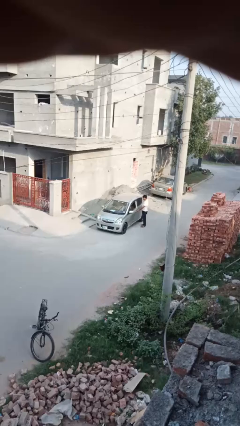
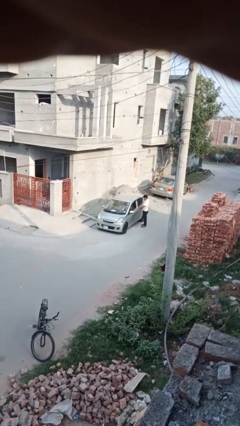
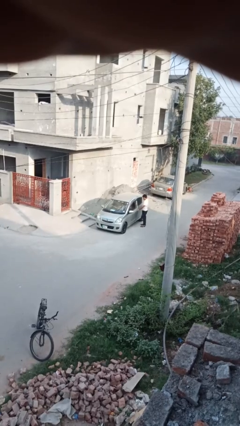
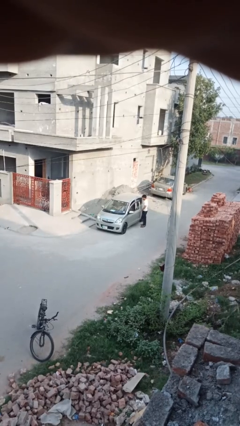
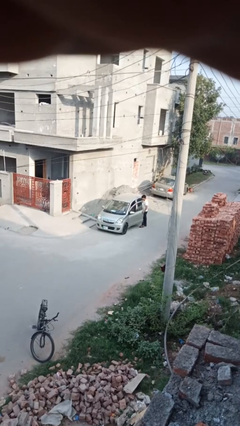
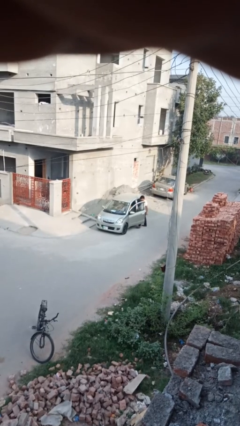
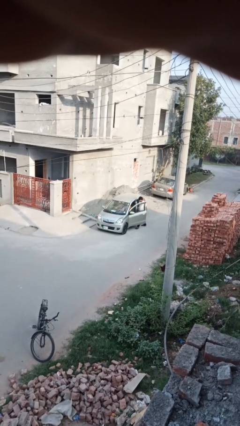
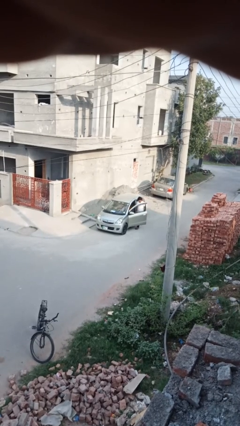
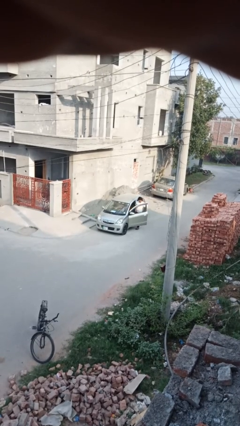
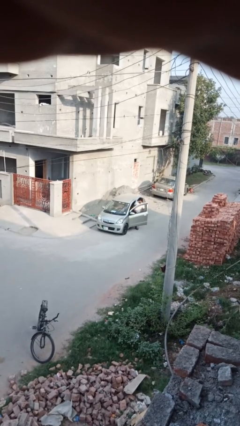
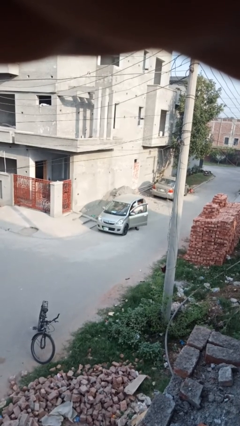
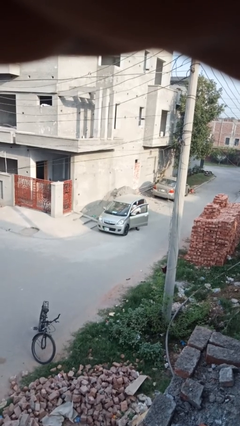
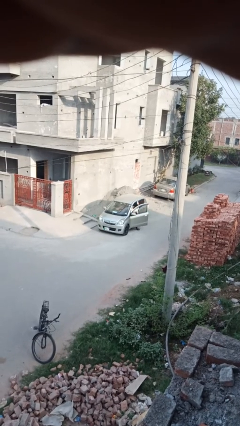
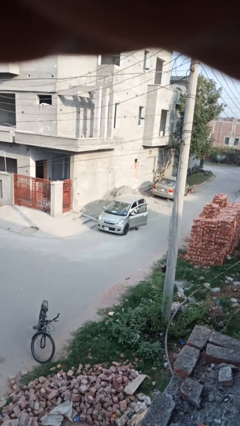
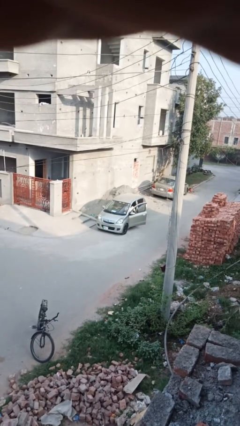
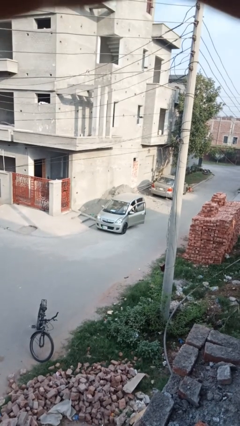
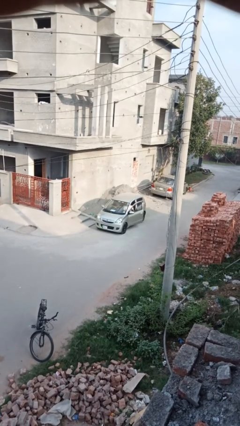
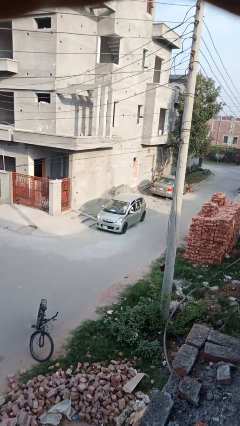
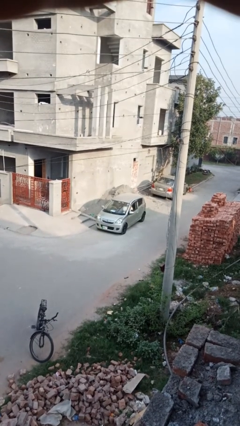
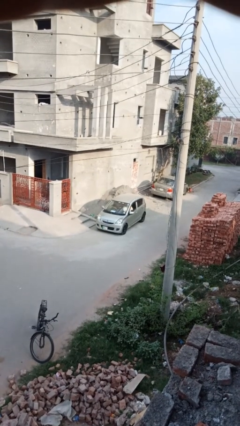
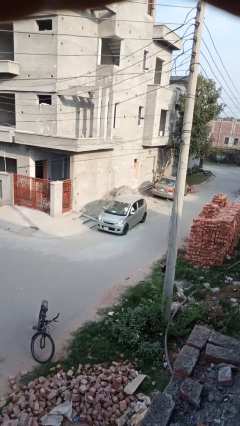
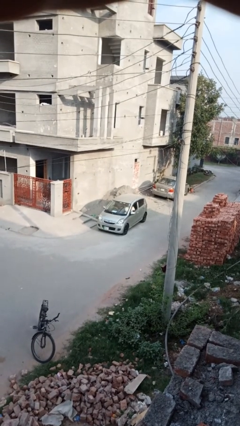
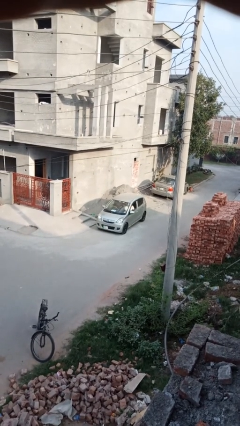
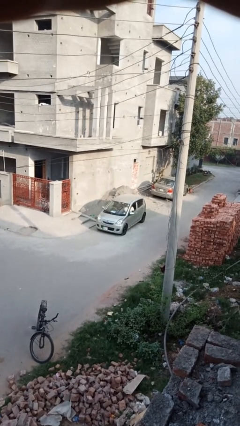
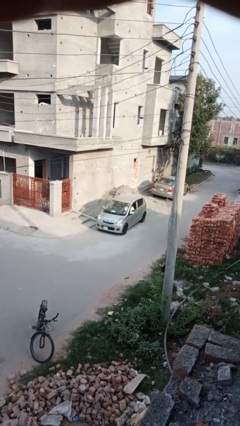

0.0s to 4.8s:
car picks up person

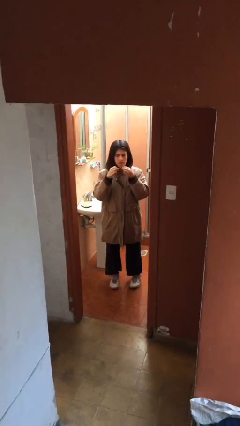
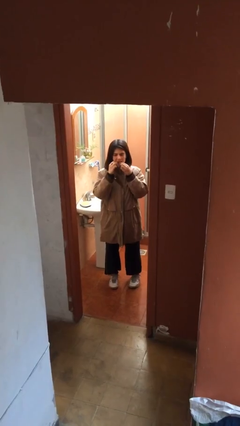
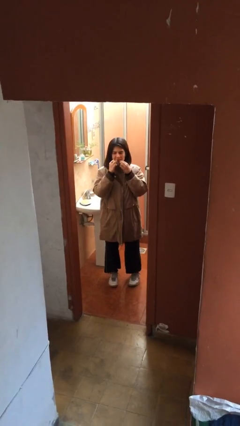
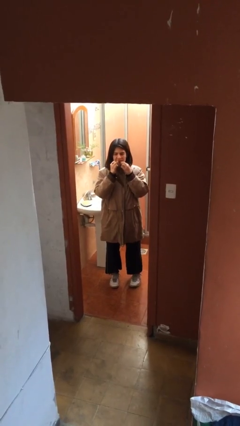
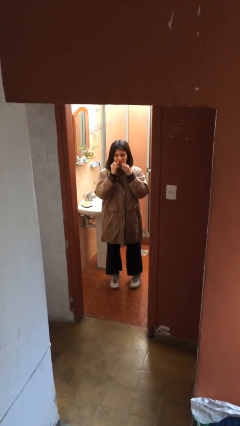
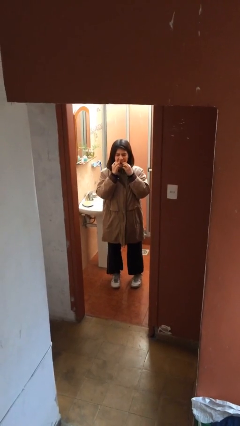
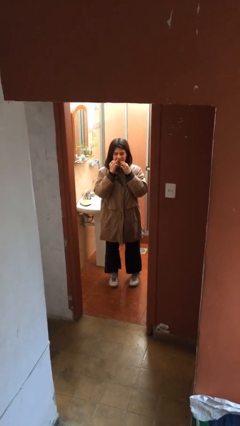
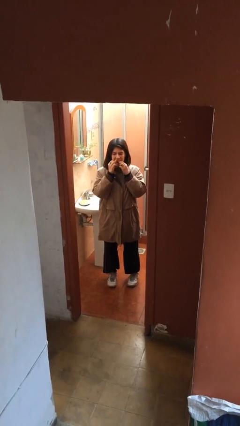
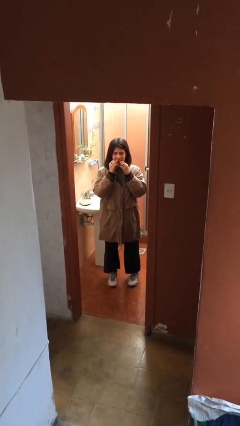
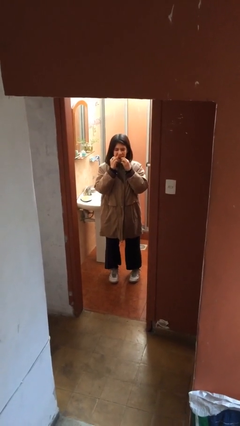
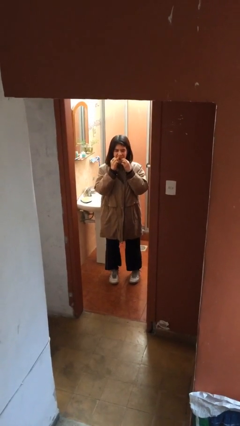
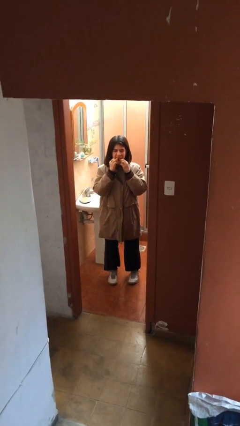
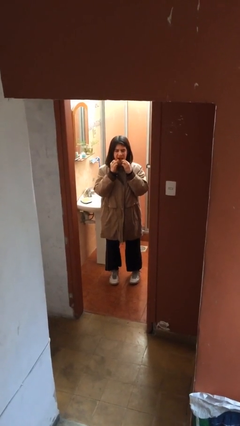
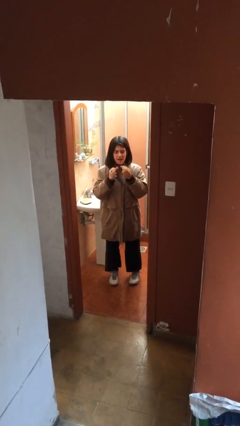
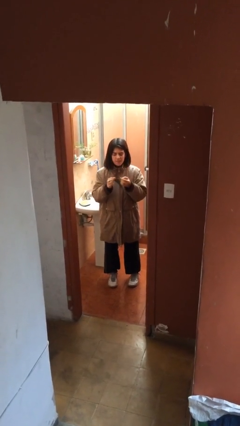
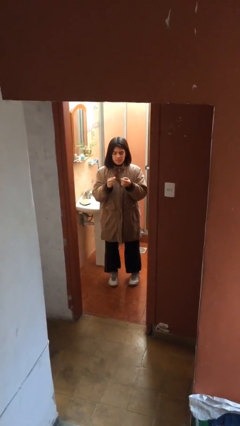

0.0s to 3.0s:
person flosses

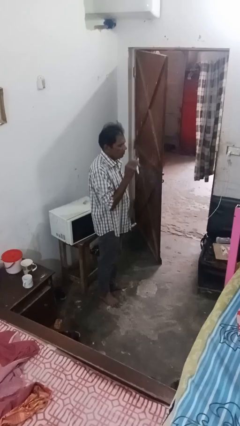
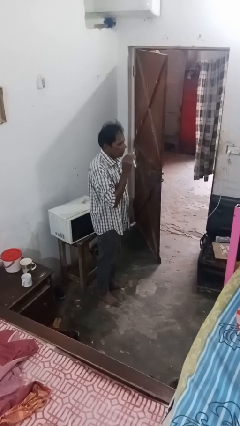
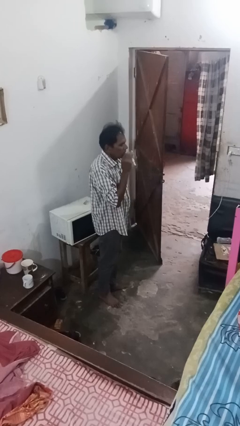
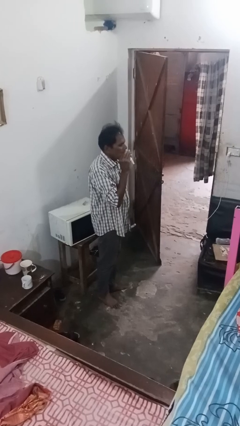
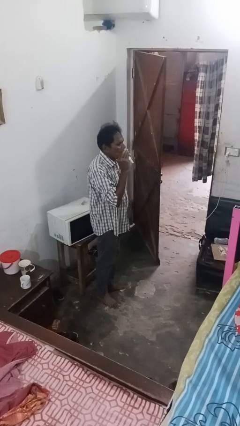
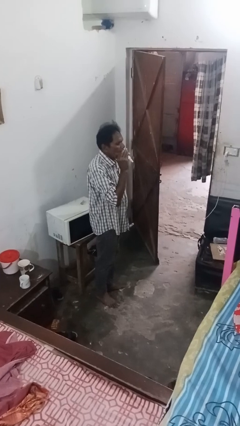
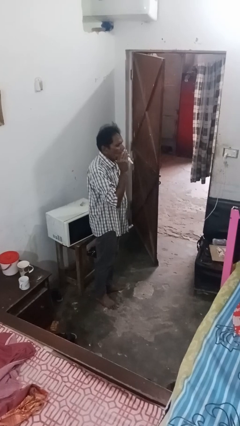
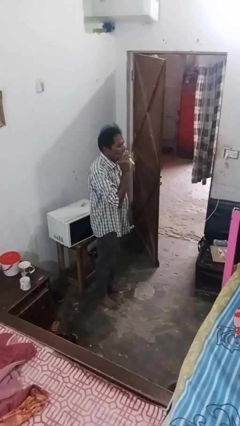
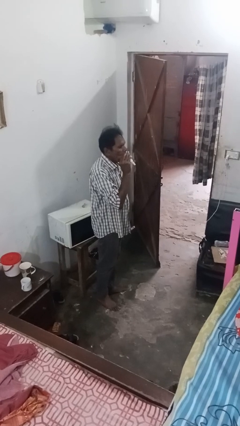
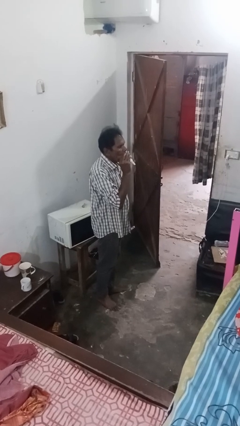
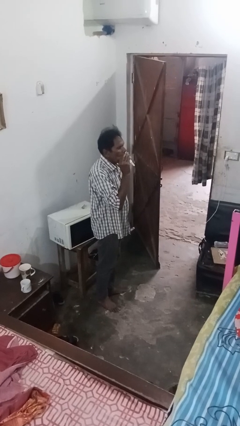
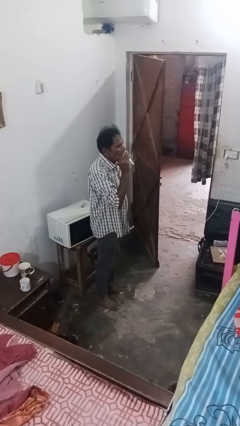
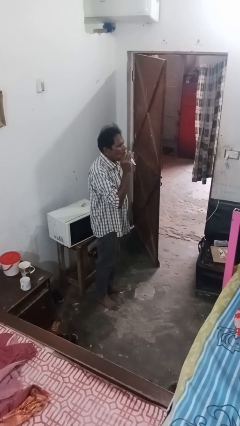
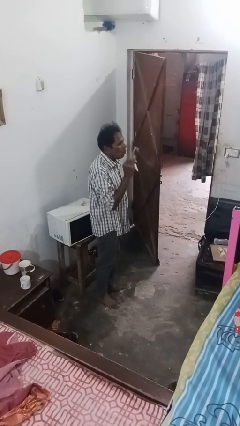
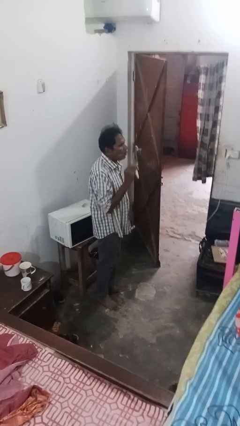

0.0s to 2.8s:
person vapes

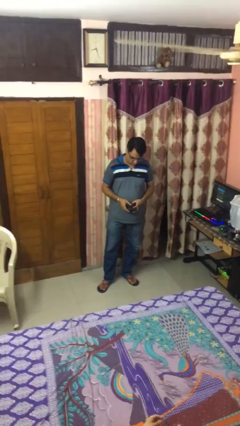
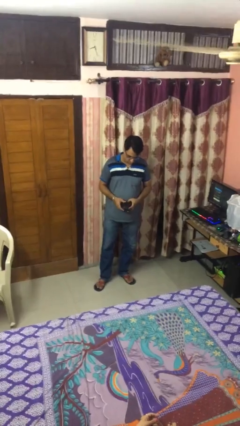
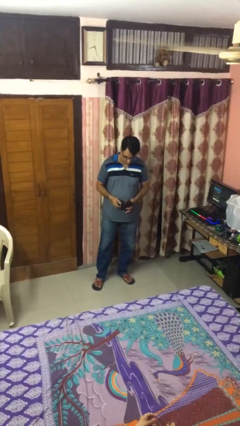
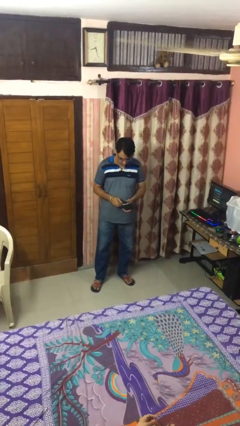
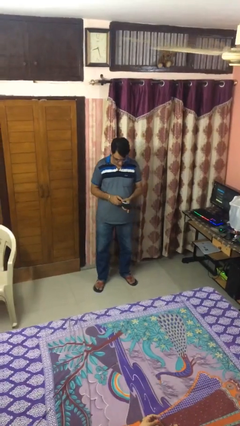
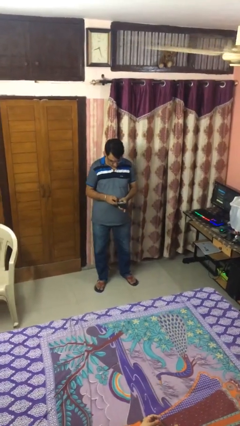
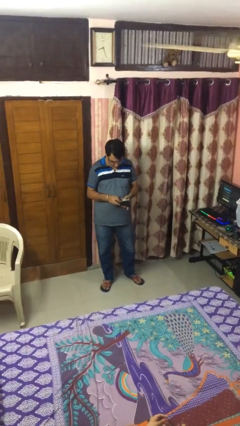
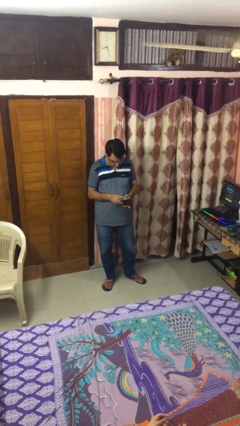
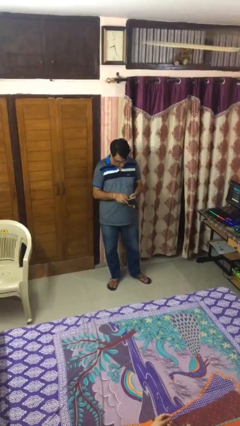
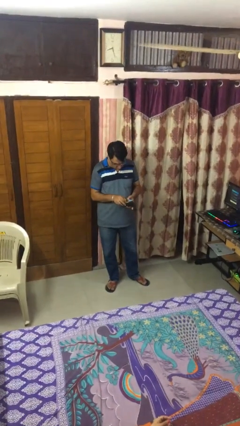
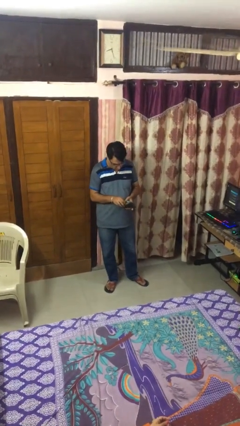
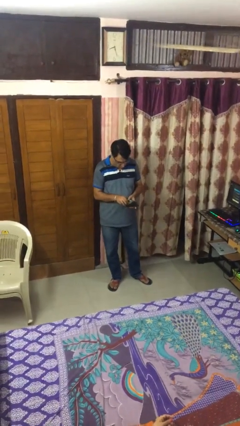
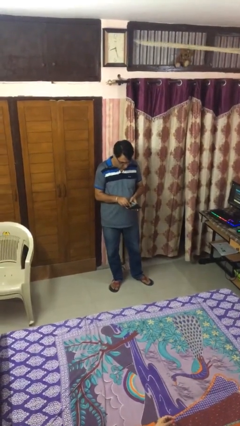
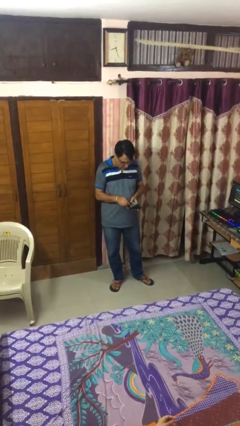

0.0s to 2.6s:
person searches in purse

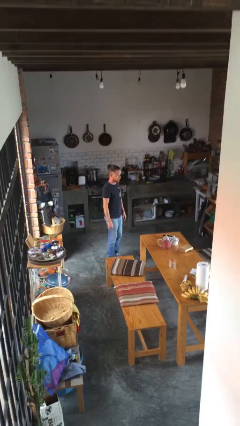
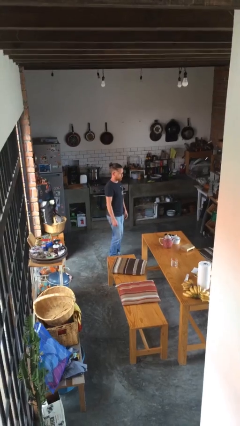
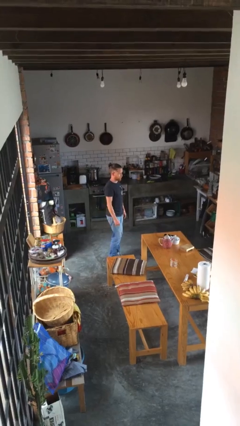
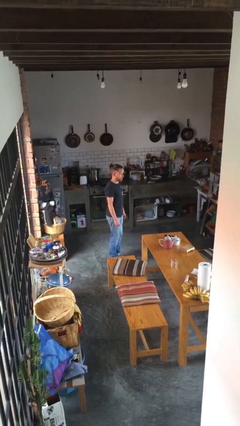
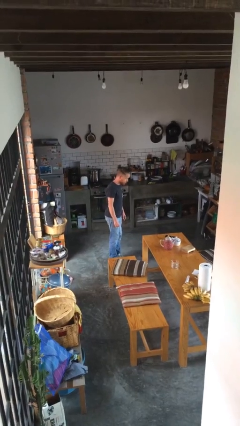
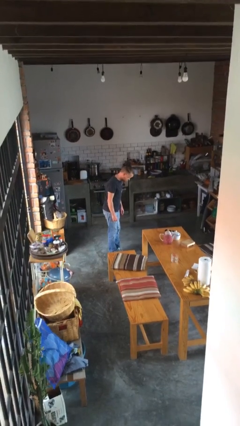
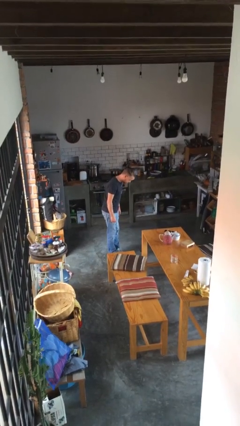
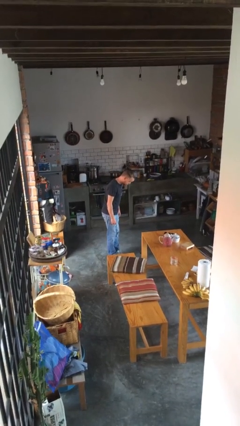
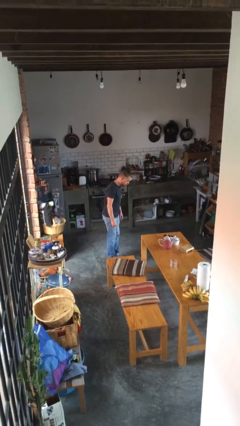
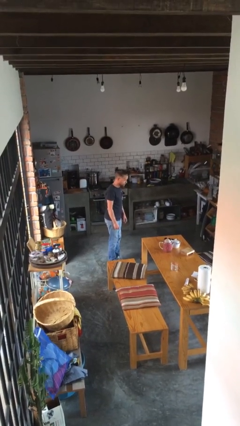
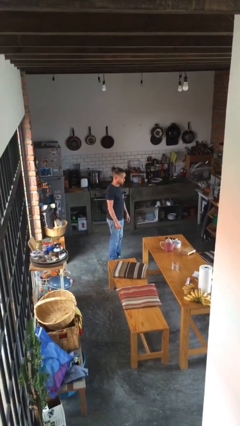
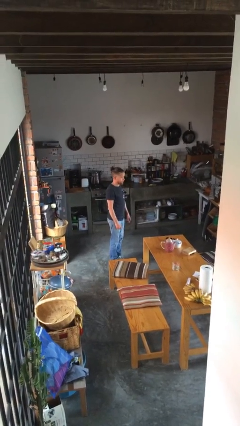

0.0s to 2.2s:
person bows

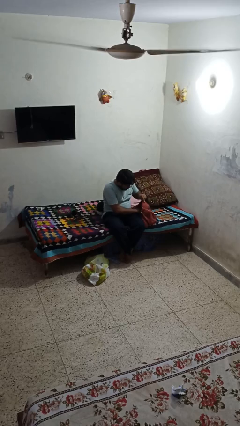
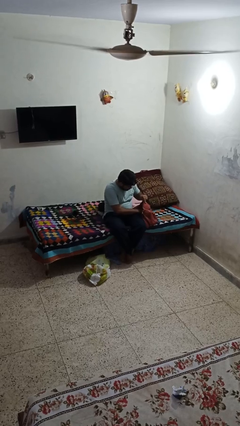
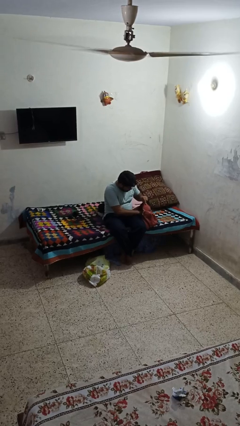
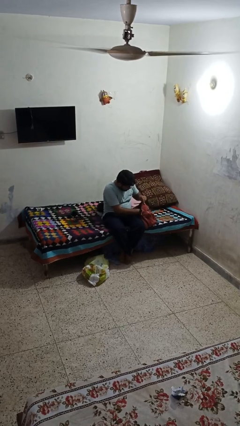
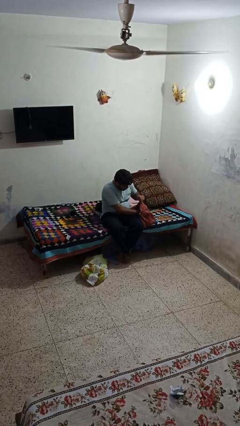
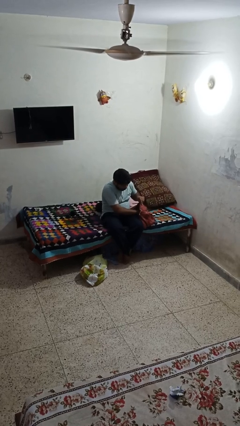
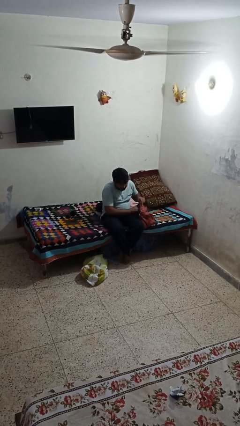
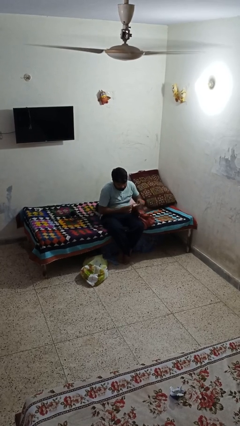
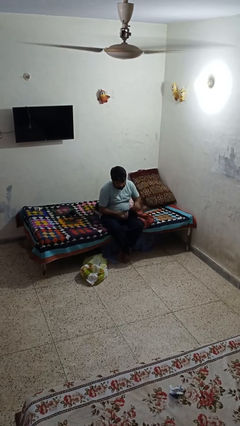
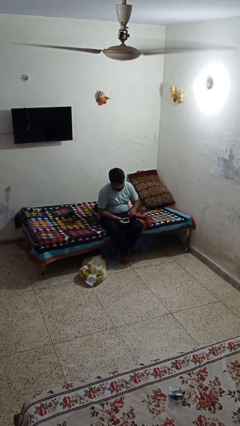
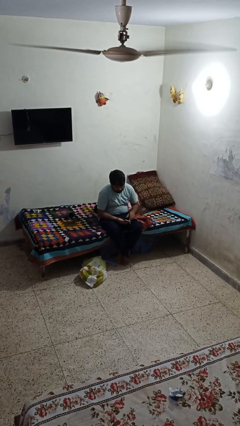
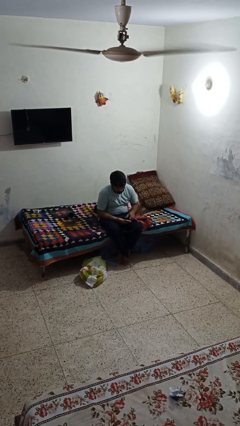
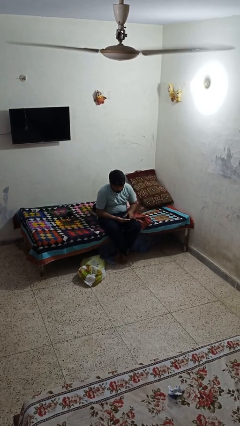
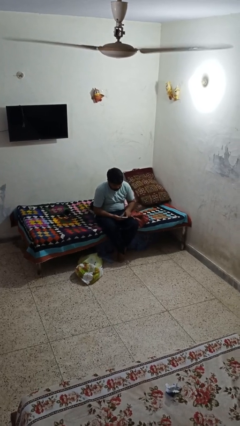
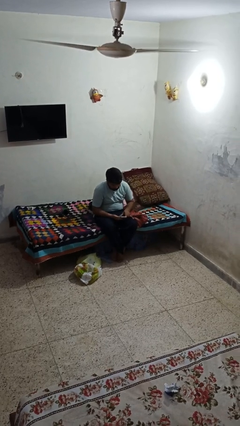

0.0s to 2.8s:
person takes object from purse
